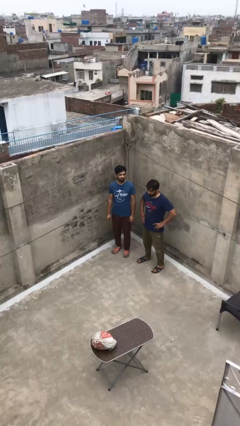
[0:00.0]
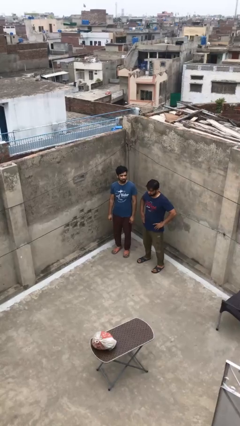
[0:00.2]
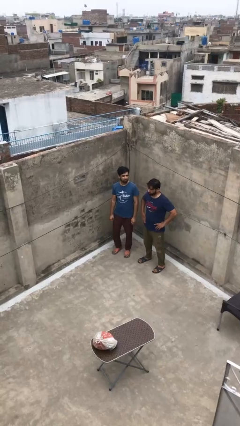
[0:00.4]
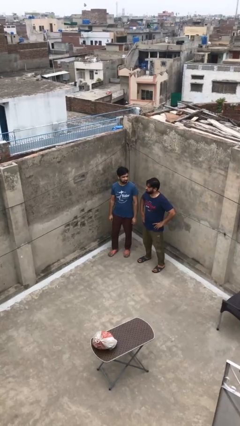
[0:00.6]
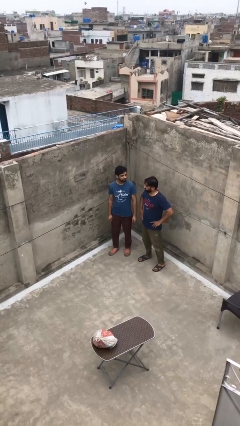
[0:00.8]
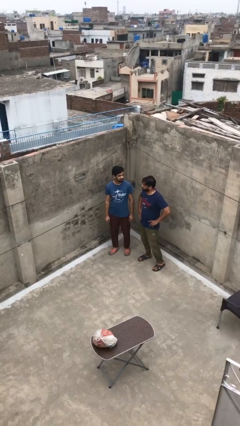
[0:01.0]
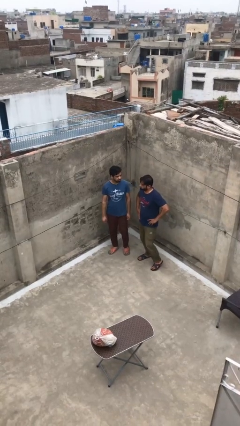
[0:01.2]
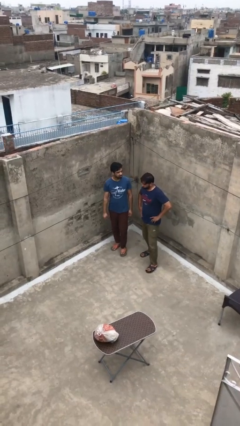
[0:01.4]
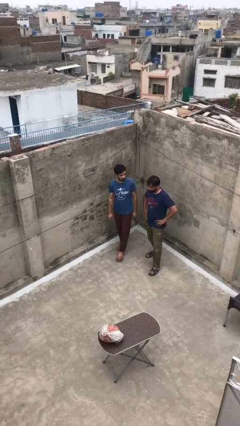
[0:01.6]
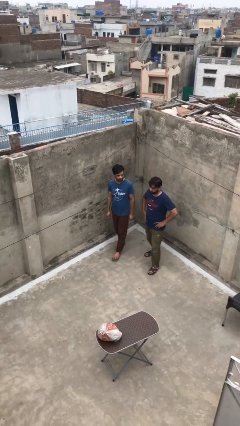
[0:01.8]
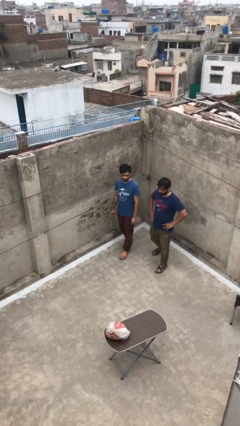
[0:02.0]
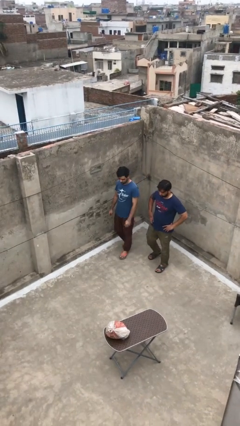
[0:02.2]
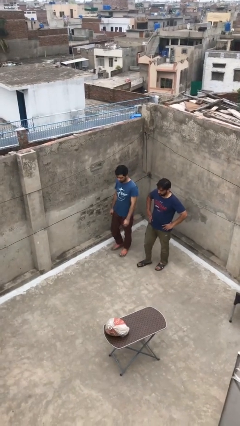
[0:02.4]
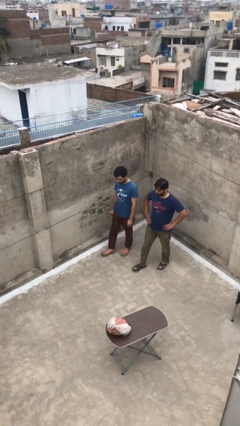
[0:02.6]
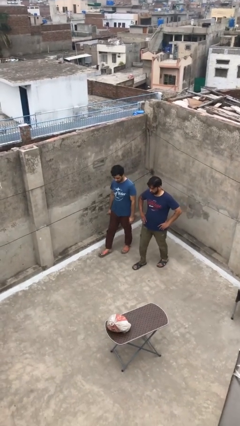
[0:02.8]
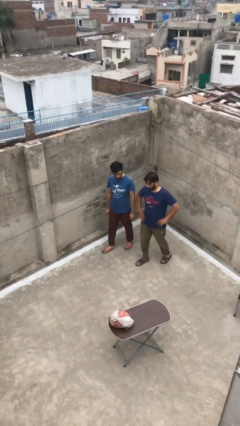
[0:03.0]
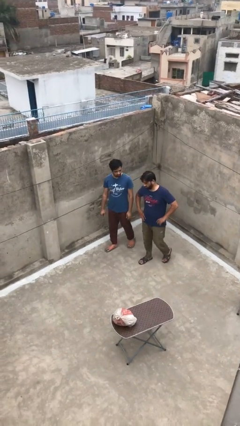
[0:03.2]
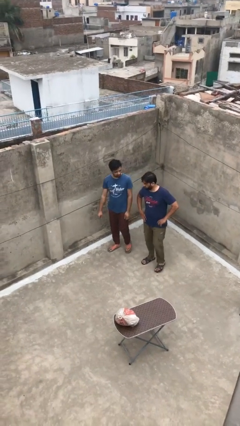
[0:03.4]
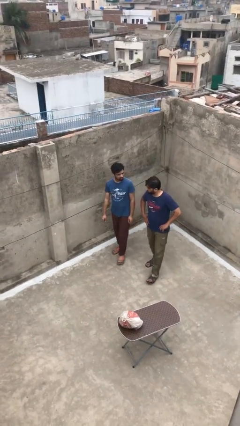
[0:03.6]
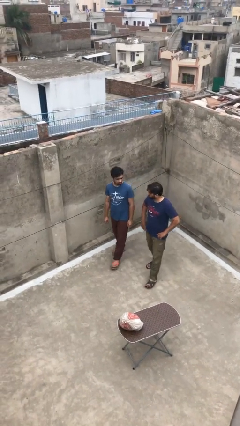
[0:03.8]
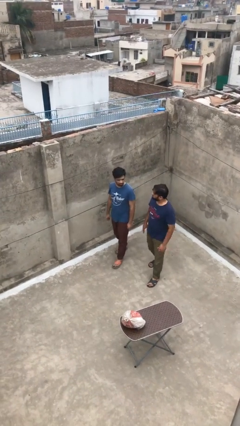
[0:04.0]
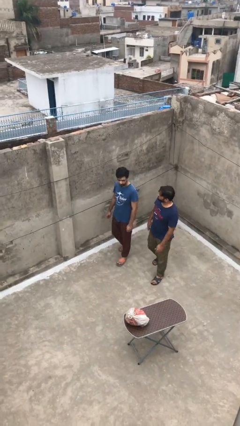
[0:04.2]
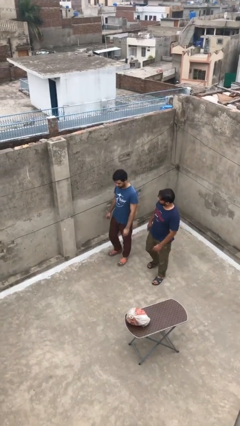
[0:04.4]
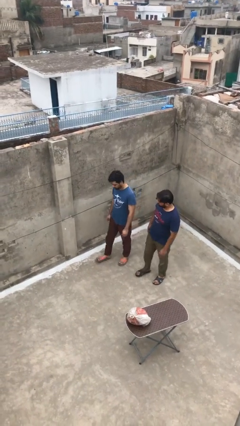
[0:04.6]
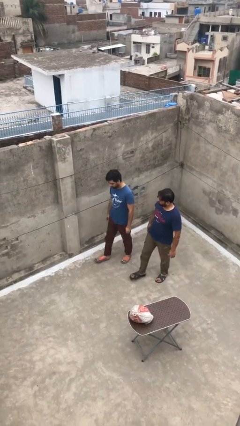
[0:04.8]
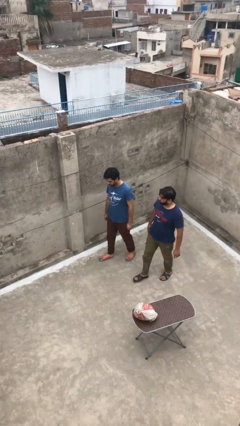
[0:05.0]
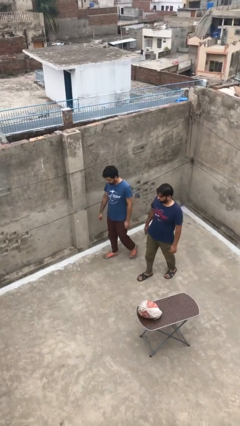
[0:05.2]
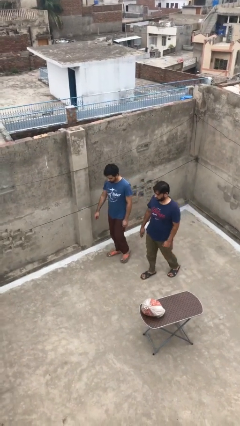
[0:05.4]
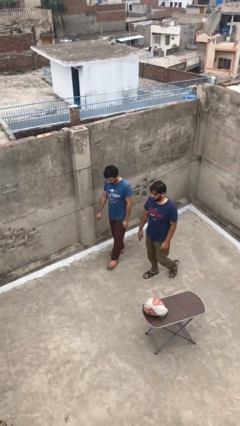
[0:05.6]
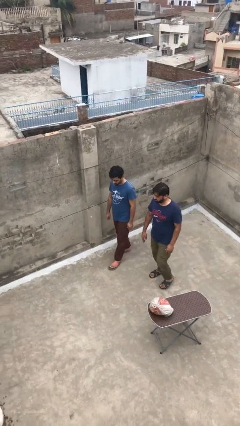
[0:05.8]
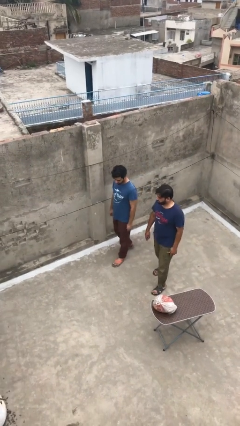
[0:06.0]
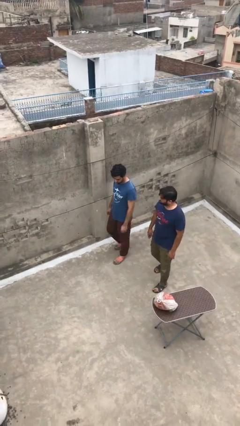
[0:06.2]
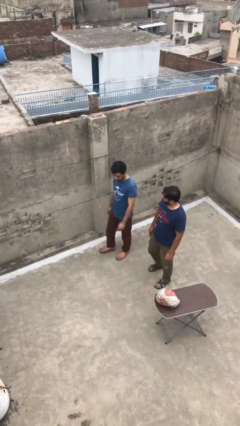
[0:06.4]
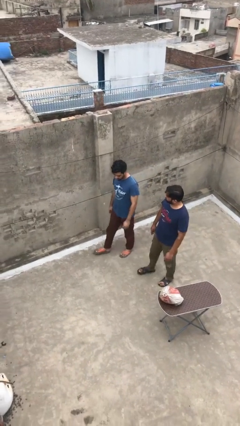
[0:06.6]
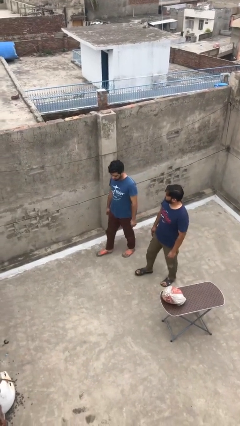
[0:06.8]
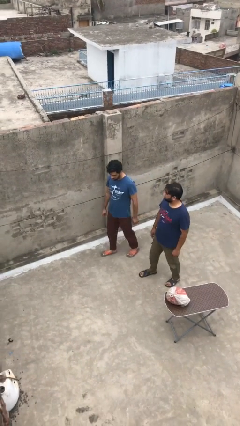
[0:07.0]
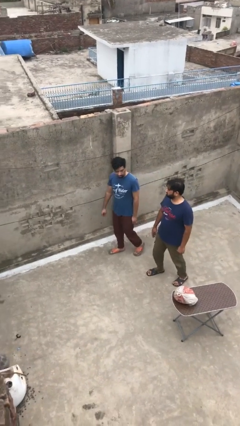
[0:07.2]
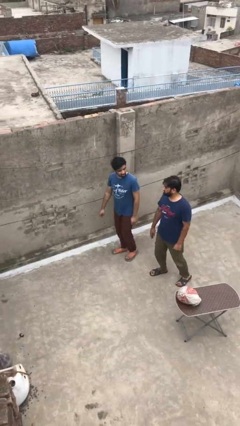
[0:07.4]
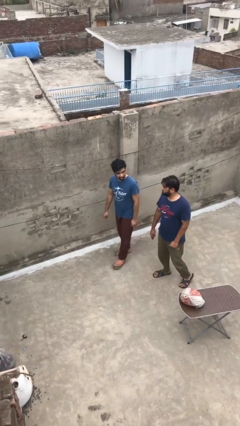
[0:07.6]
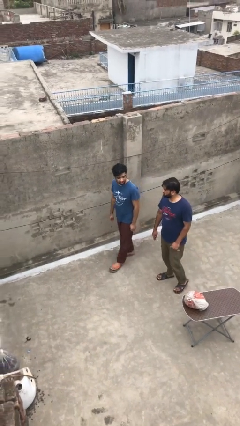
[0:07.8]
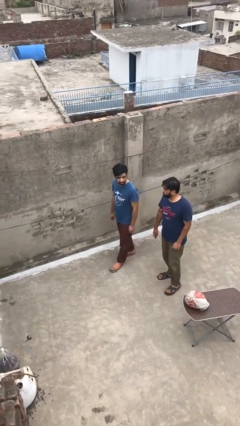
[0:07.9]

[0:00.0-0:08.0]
person talks to person

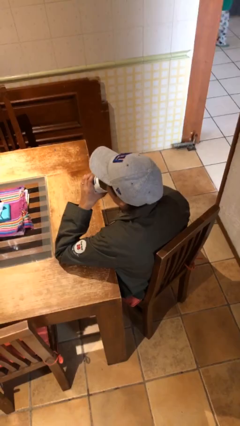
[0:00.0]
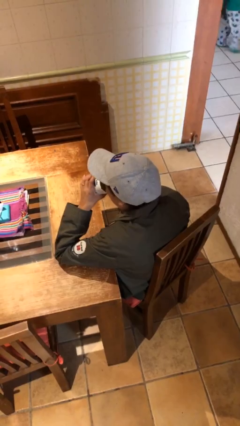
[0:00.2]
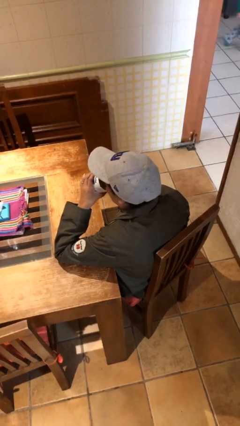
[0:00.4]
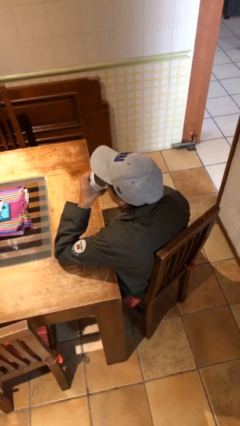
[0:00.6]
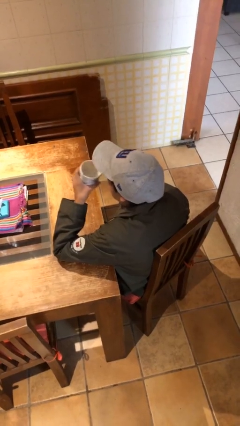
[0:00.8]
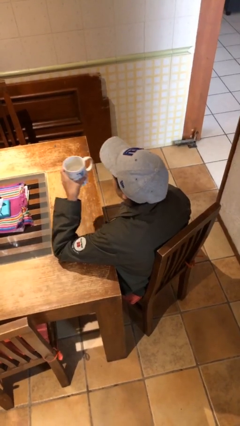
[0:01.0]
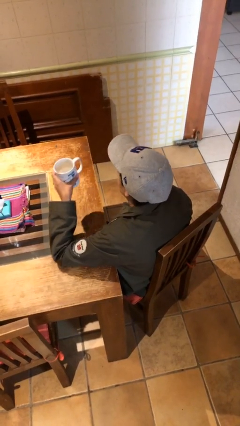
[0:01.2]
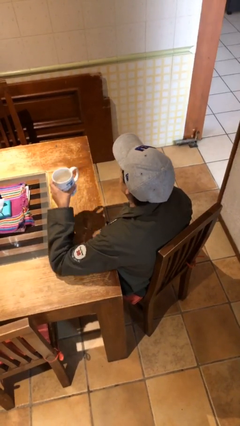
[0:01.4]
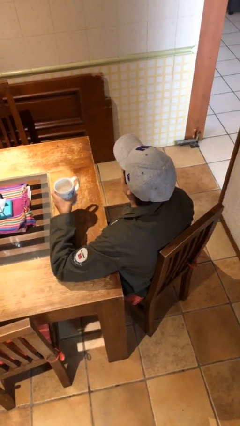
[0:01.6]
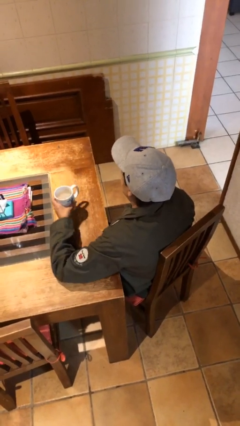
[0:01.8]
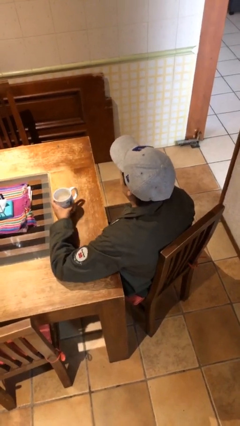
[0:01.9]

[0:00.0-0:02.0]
person puts down object on table

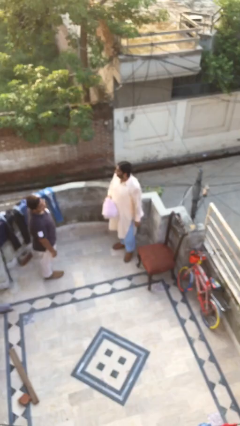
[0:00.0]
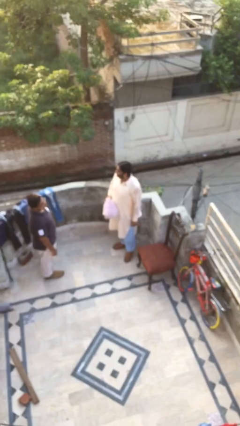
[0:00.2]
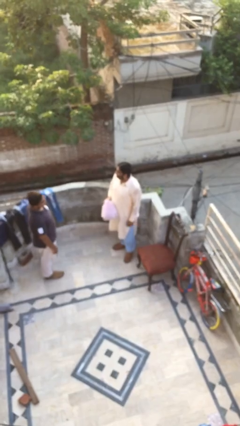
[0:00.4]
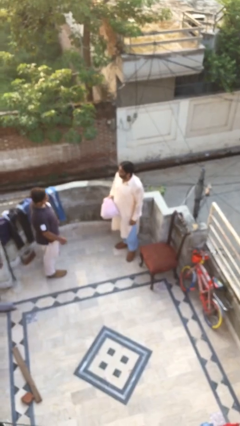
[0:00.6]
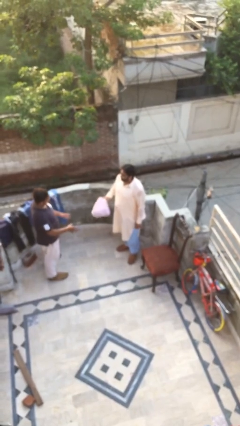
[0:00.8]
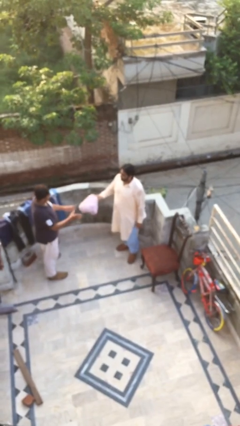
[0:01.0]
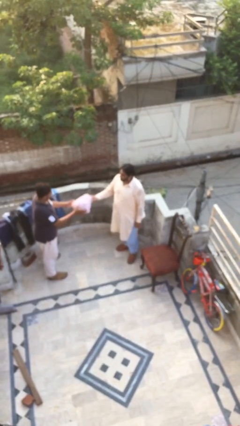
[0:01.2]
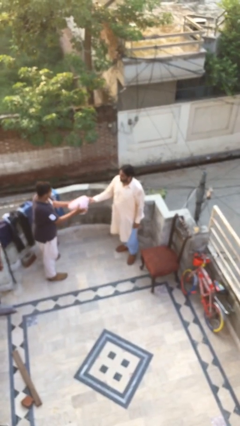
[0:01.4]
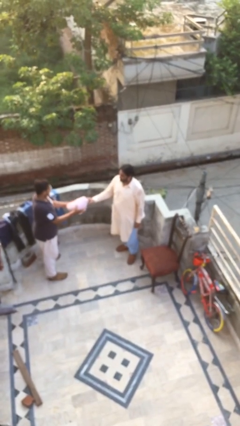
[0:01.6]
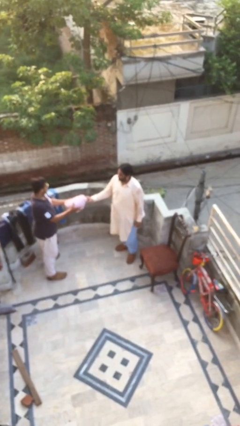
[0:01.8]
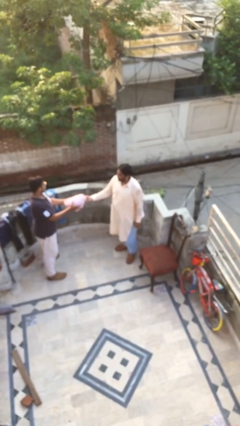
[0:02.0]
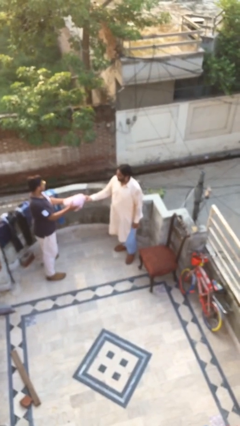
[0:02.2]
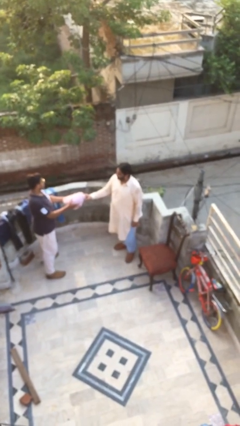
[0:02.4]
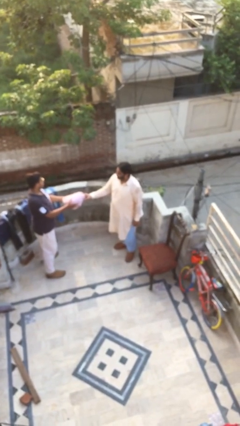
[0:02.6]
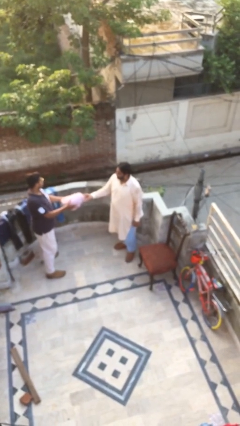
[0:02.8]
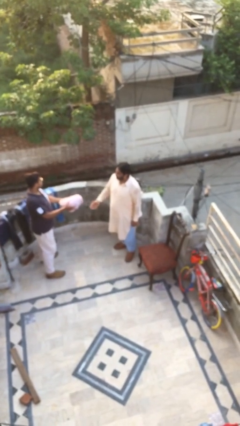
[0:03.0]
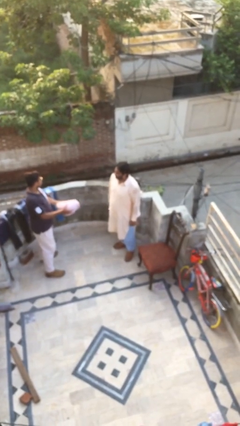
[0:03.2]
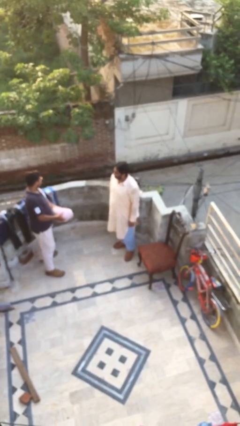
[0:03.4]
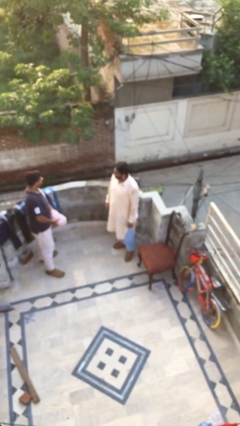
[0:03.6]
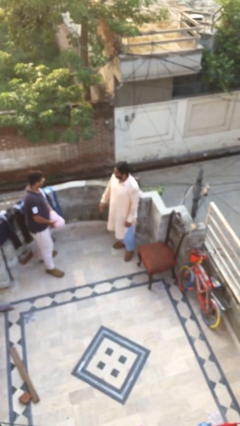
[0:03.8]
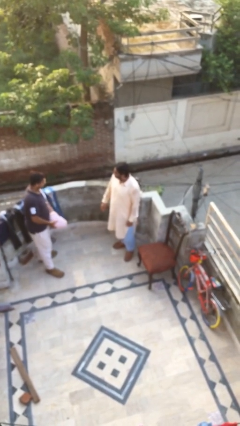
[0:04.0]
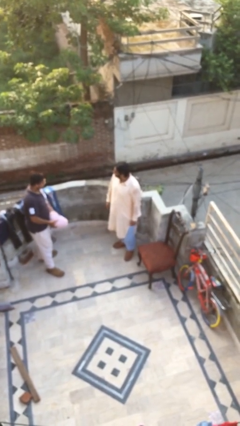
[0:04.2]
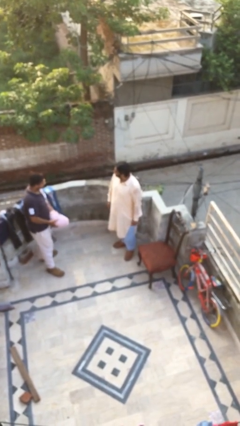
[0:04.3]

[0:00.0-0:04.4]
person transfers object to person

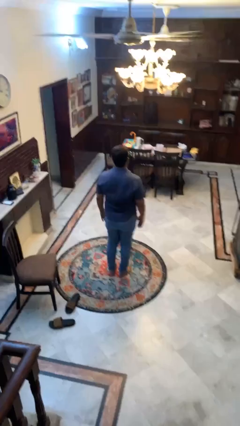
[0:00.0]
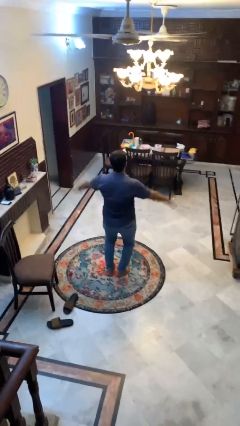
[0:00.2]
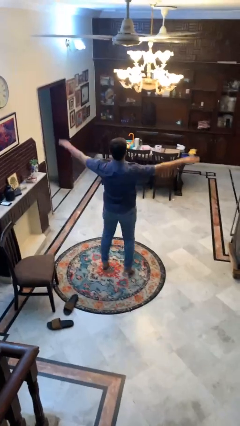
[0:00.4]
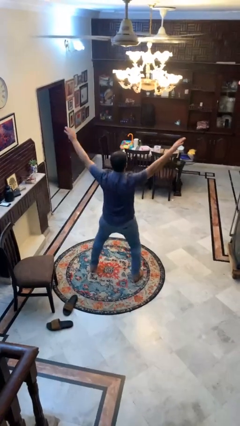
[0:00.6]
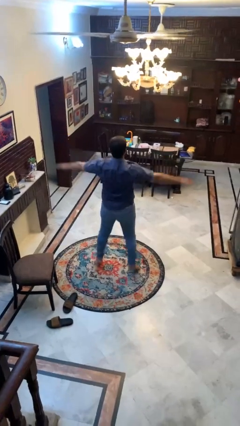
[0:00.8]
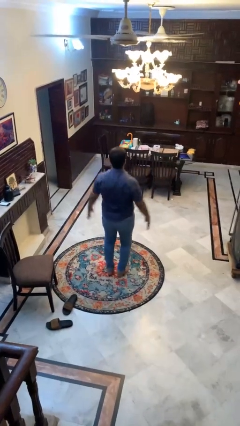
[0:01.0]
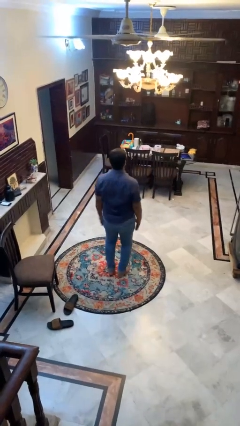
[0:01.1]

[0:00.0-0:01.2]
person exercises with jumping jacks

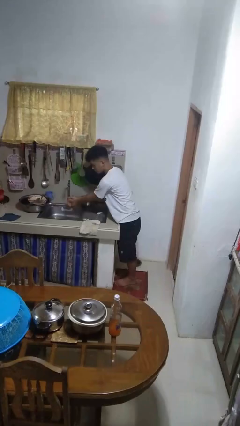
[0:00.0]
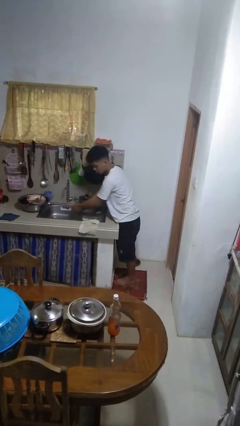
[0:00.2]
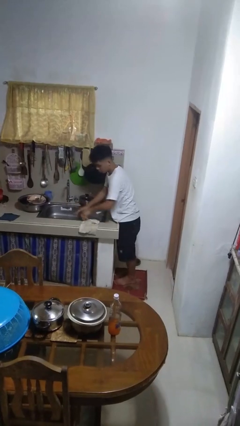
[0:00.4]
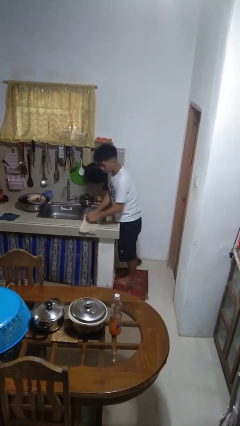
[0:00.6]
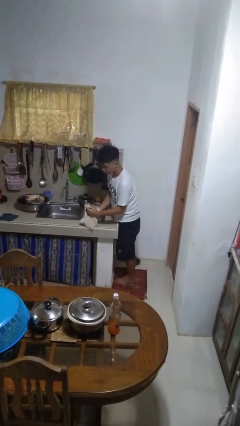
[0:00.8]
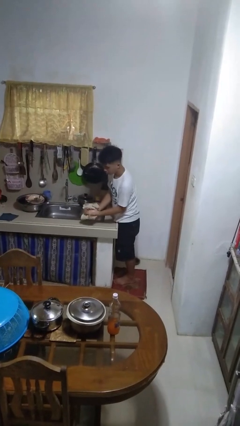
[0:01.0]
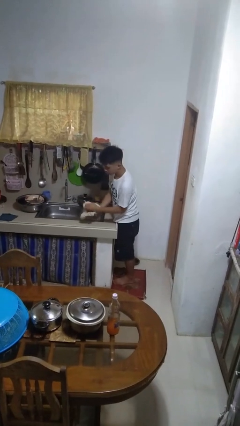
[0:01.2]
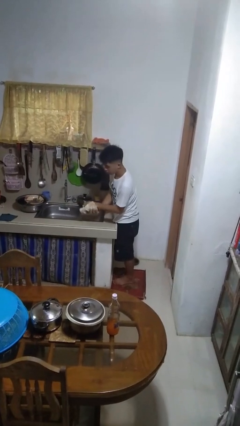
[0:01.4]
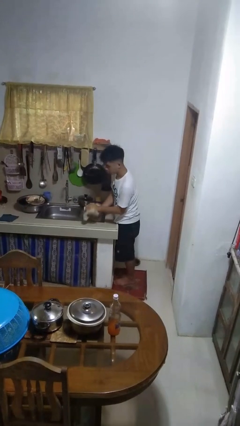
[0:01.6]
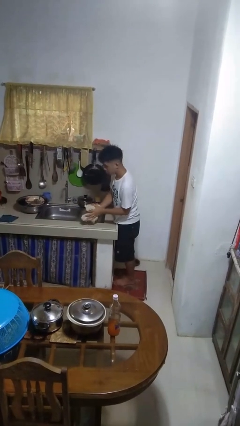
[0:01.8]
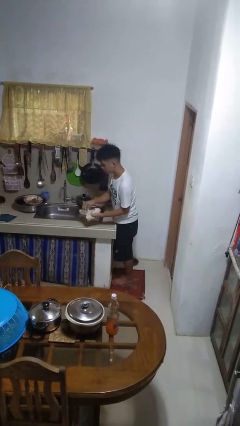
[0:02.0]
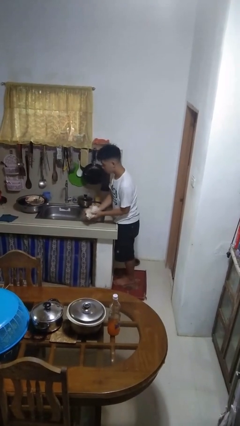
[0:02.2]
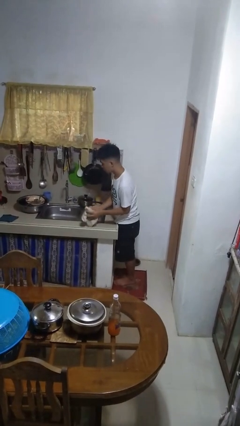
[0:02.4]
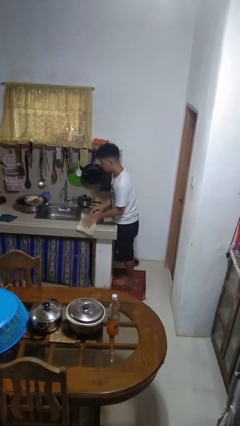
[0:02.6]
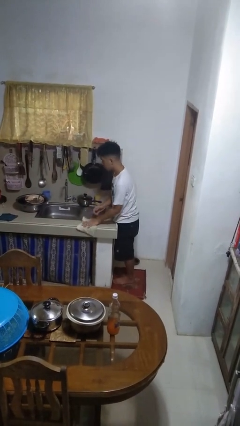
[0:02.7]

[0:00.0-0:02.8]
person dries hands with towel
